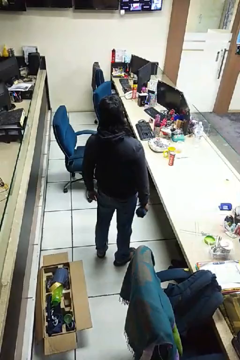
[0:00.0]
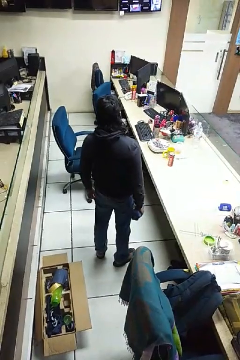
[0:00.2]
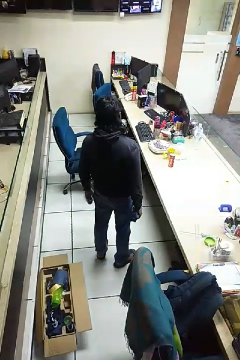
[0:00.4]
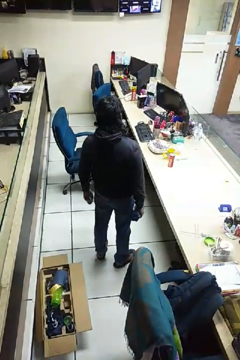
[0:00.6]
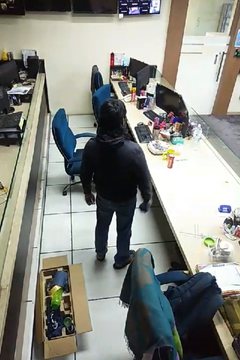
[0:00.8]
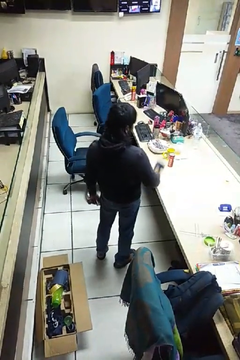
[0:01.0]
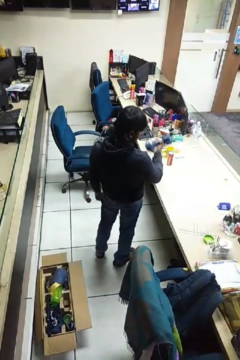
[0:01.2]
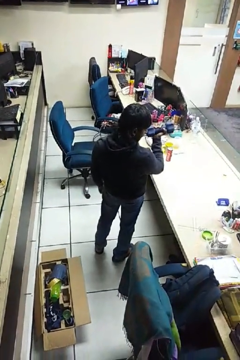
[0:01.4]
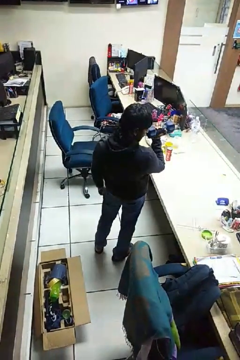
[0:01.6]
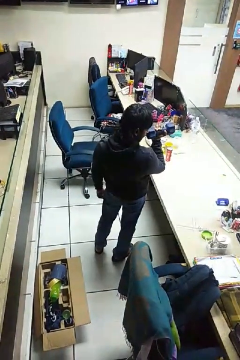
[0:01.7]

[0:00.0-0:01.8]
person lifts dumbbells

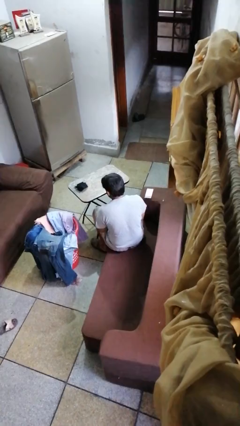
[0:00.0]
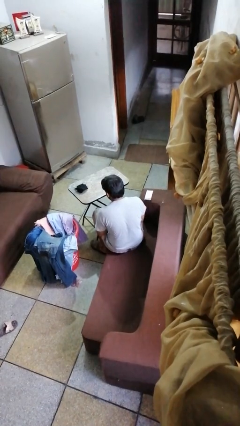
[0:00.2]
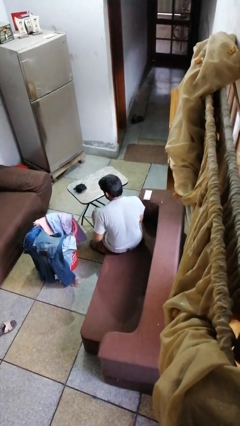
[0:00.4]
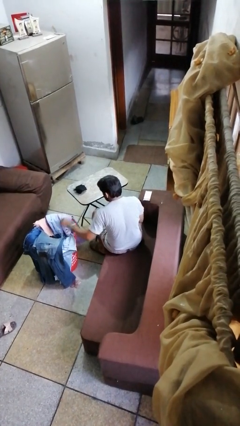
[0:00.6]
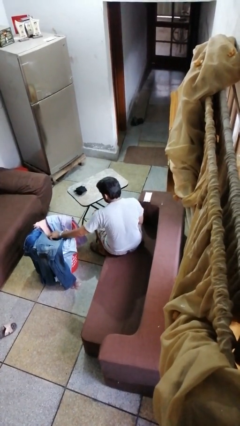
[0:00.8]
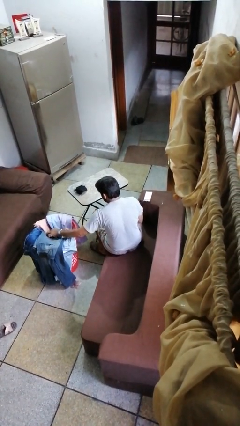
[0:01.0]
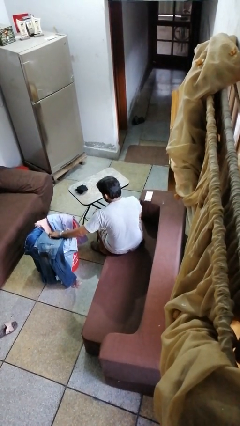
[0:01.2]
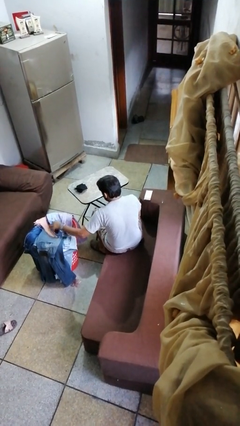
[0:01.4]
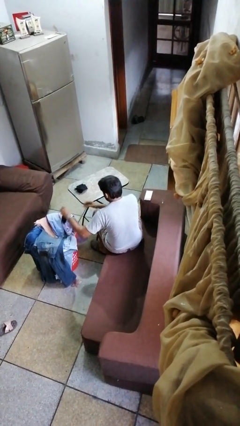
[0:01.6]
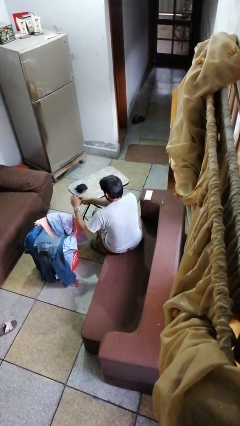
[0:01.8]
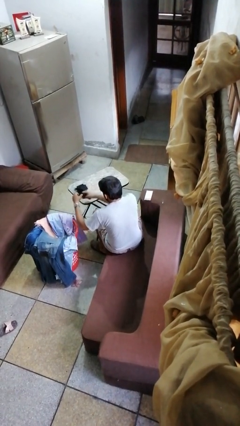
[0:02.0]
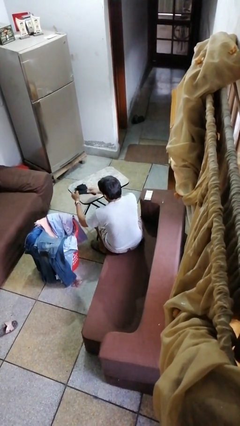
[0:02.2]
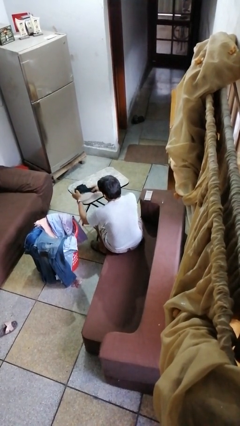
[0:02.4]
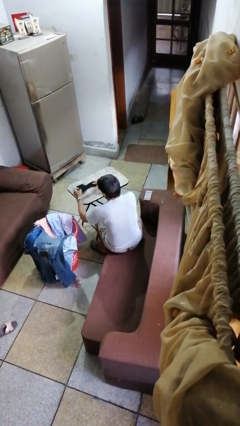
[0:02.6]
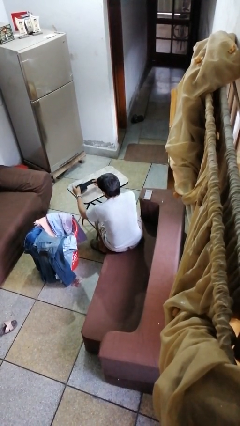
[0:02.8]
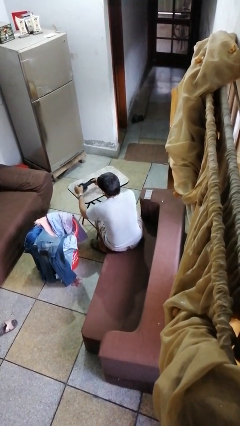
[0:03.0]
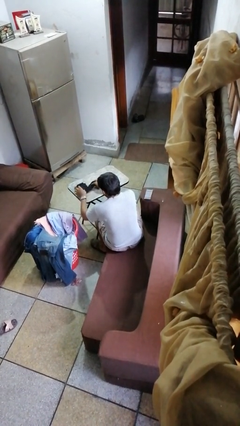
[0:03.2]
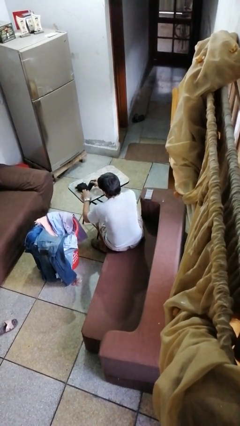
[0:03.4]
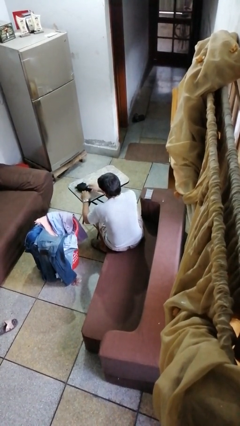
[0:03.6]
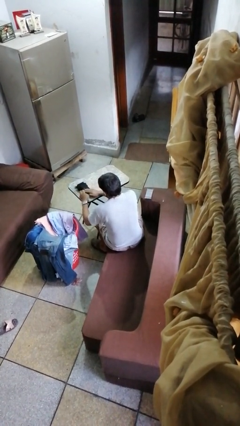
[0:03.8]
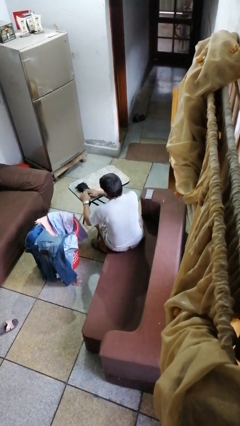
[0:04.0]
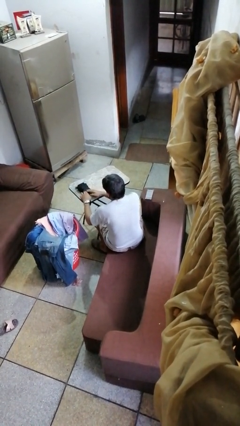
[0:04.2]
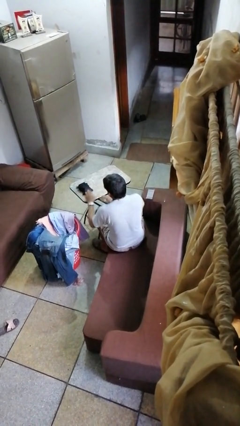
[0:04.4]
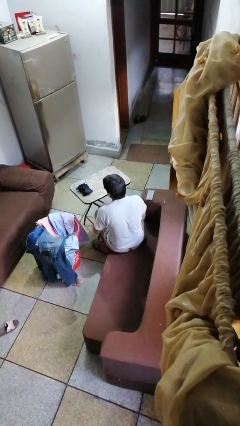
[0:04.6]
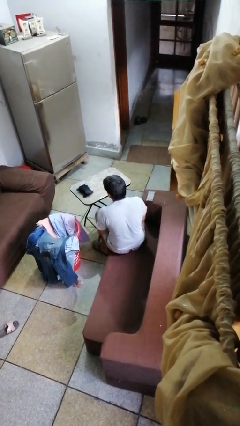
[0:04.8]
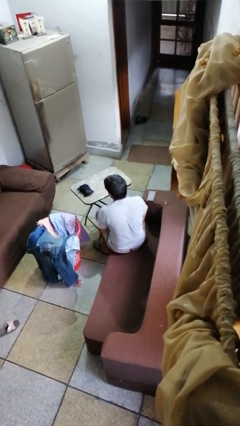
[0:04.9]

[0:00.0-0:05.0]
person folds socks

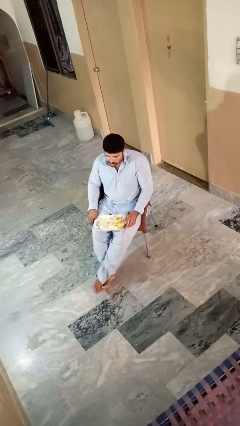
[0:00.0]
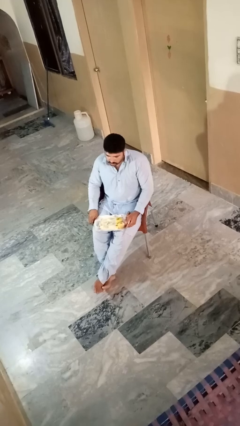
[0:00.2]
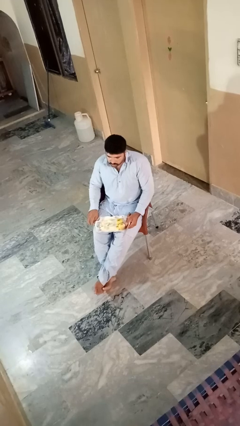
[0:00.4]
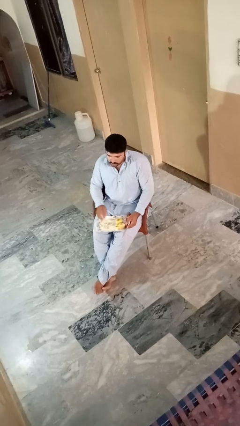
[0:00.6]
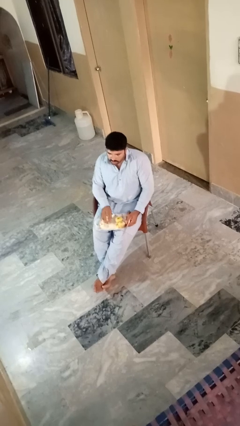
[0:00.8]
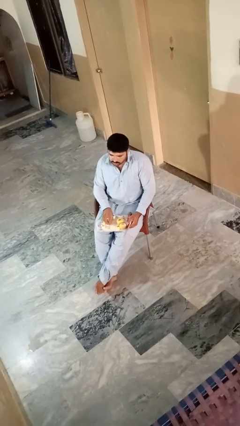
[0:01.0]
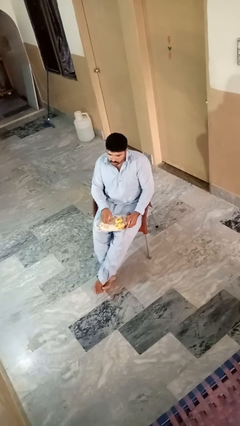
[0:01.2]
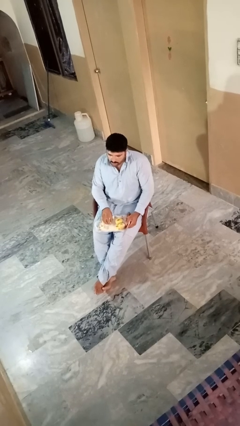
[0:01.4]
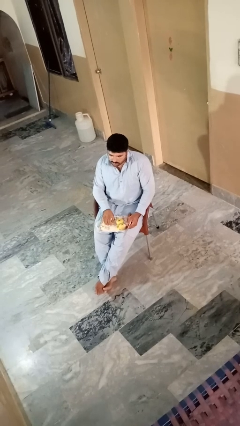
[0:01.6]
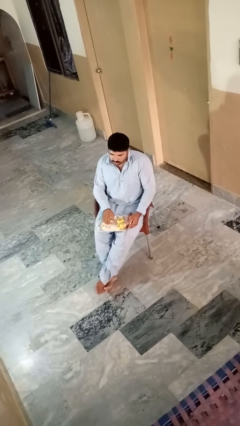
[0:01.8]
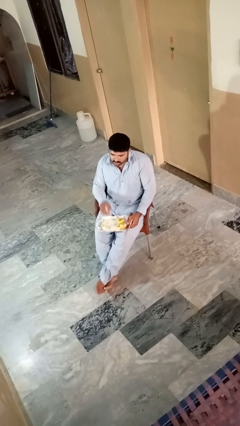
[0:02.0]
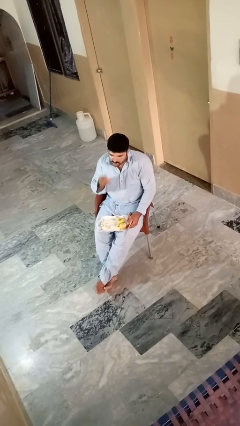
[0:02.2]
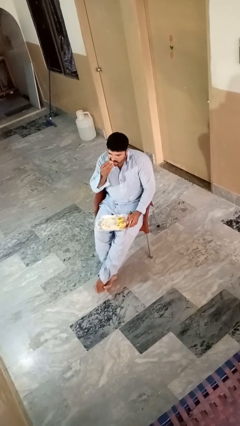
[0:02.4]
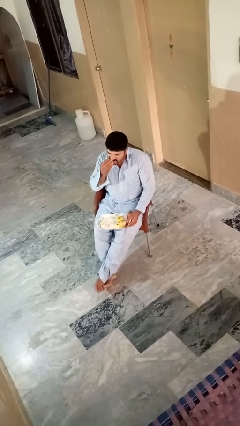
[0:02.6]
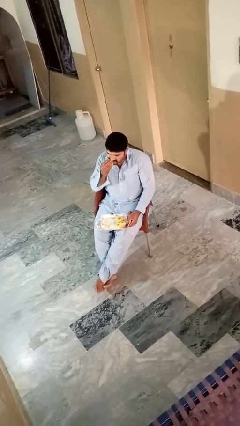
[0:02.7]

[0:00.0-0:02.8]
person eats apple

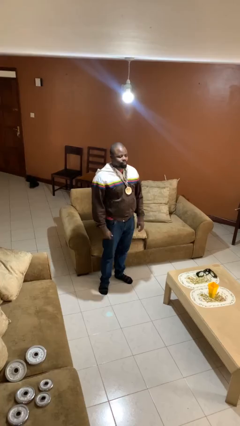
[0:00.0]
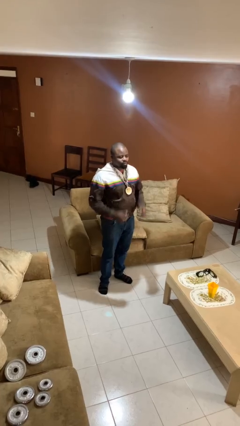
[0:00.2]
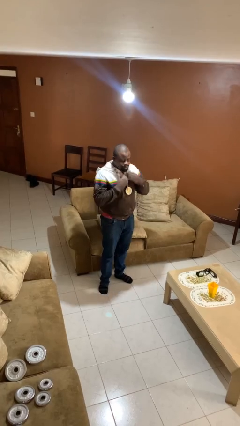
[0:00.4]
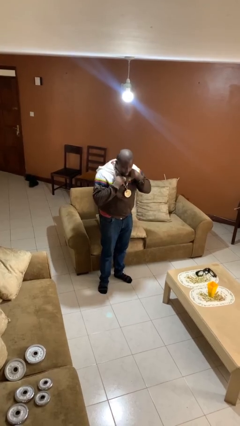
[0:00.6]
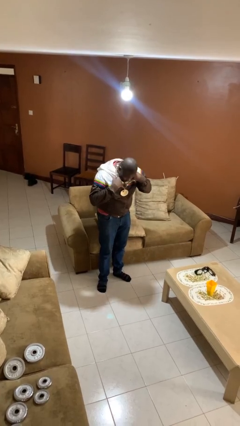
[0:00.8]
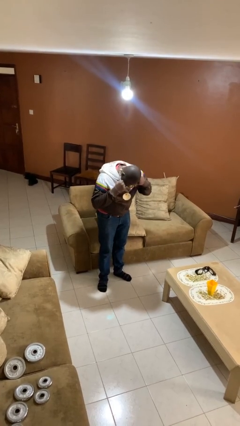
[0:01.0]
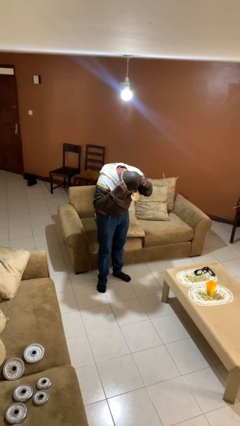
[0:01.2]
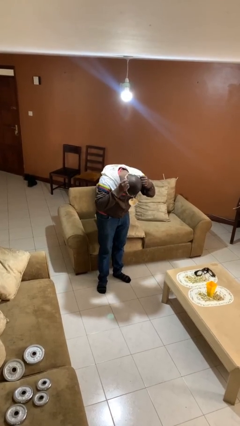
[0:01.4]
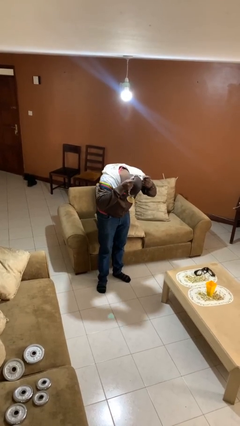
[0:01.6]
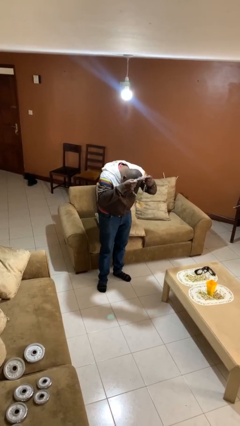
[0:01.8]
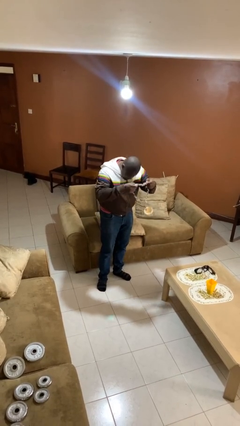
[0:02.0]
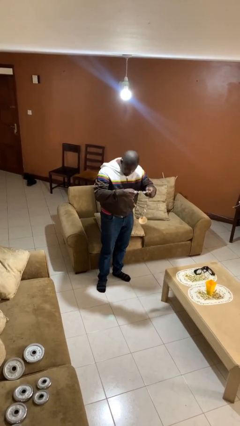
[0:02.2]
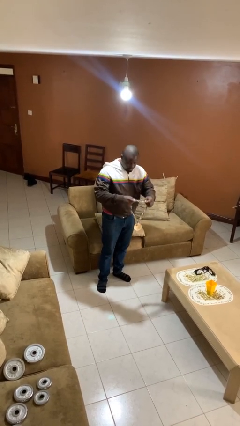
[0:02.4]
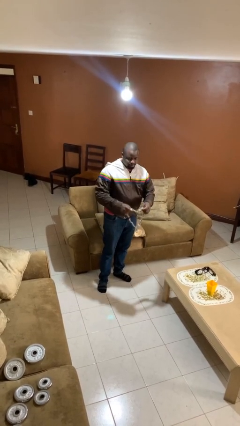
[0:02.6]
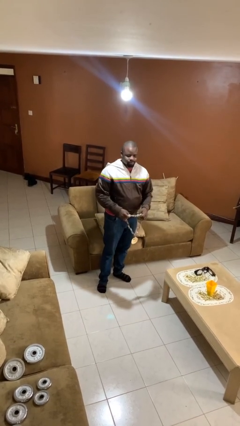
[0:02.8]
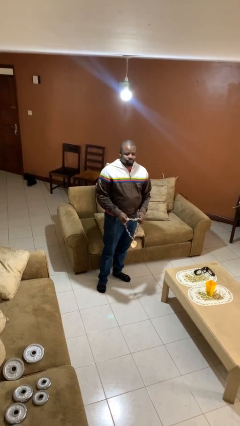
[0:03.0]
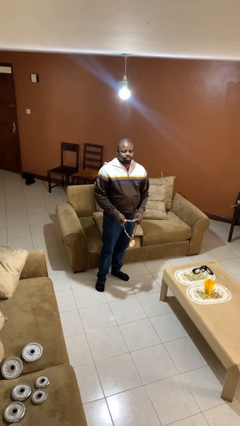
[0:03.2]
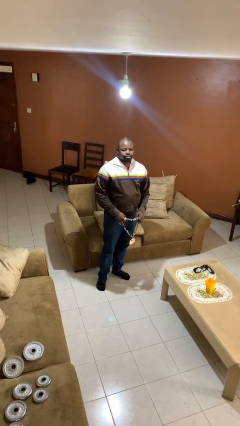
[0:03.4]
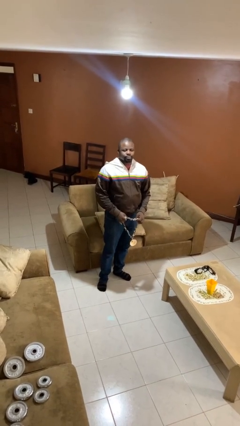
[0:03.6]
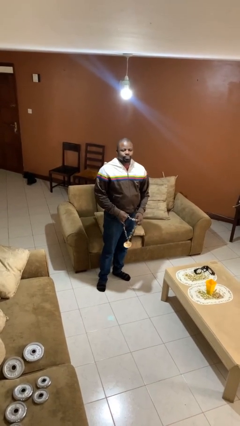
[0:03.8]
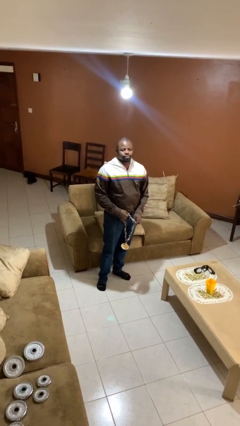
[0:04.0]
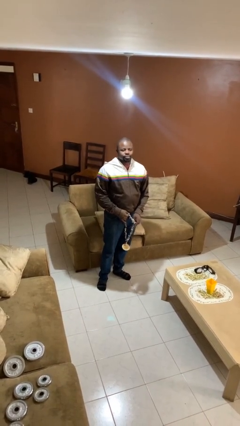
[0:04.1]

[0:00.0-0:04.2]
person takes off necklace

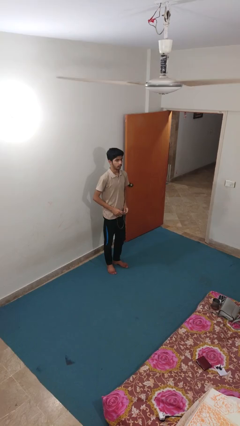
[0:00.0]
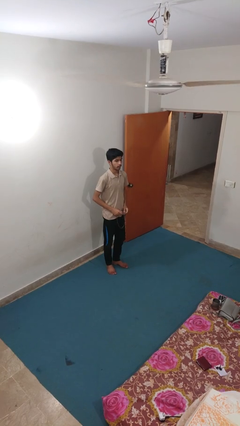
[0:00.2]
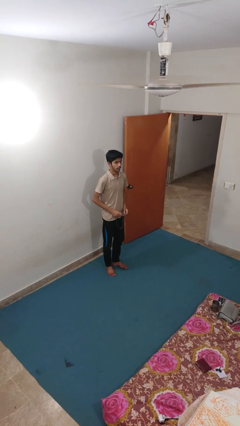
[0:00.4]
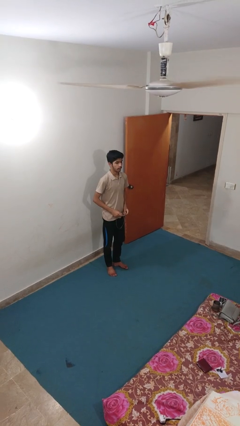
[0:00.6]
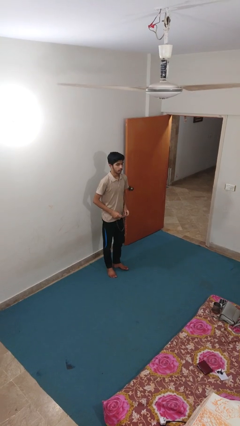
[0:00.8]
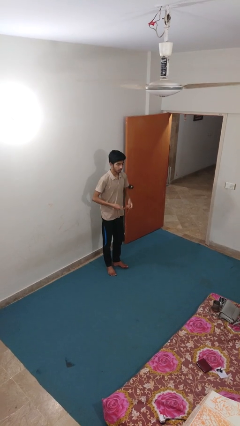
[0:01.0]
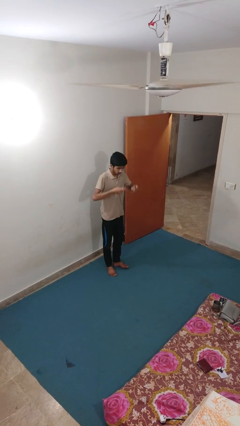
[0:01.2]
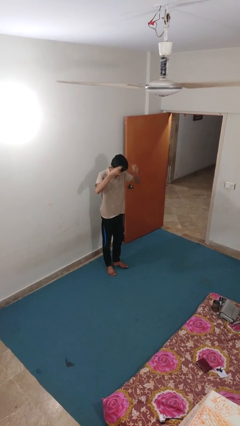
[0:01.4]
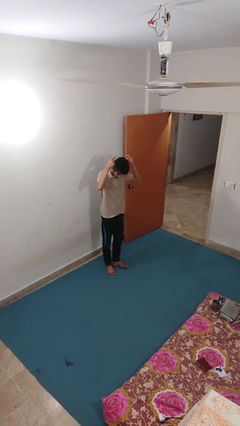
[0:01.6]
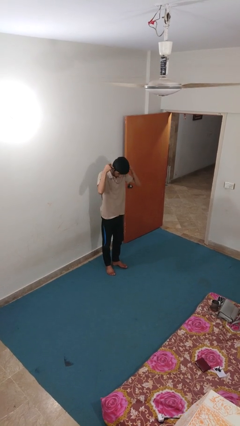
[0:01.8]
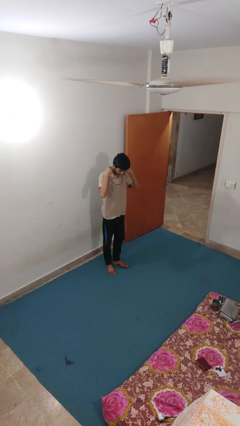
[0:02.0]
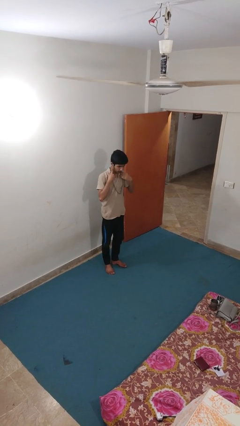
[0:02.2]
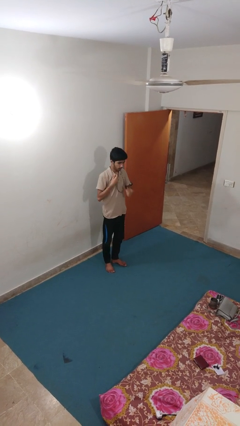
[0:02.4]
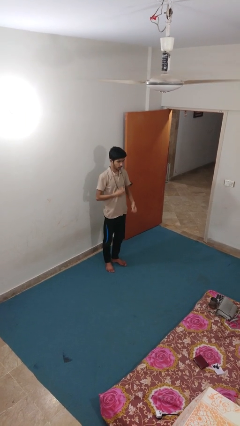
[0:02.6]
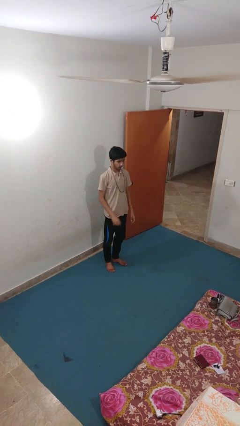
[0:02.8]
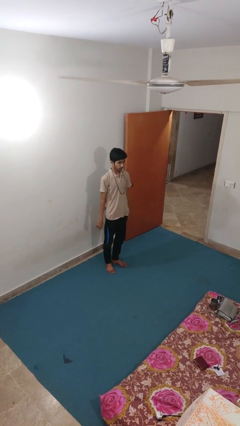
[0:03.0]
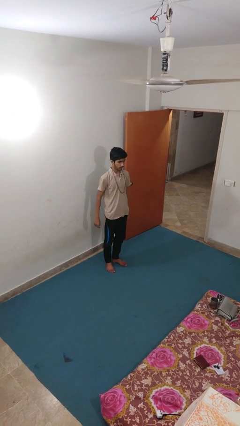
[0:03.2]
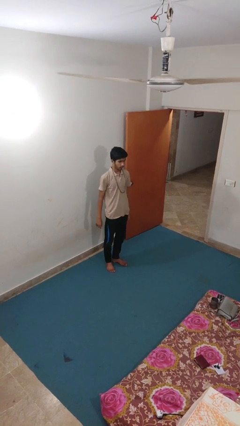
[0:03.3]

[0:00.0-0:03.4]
person puts on necklace
